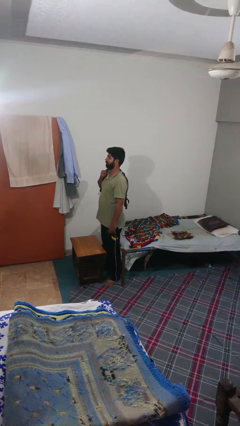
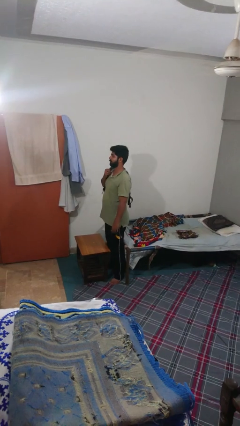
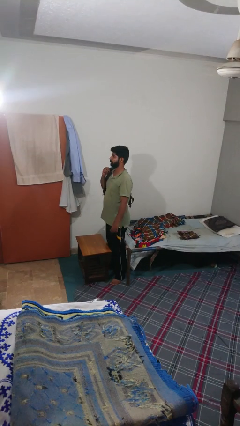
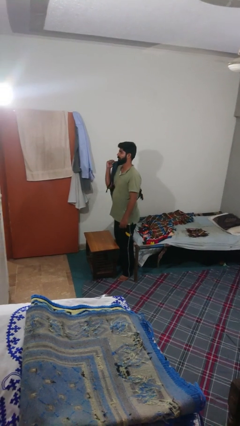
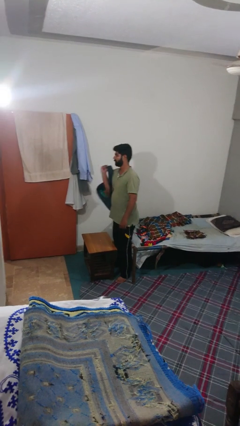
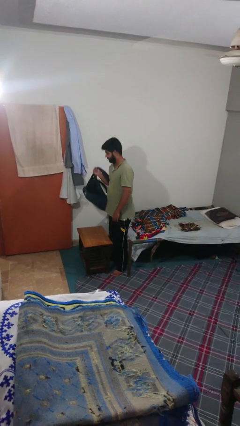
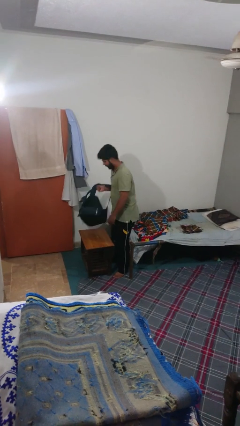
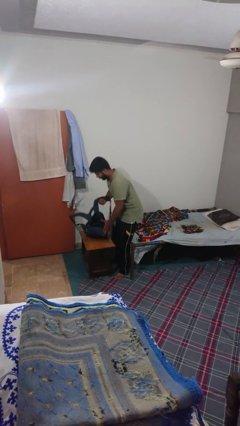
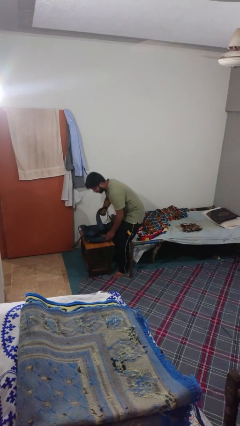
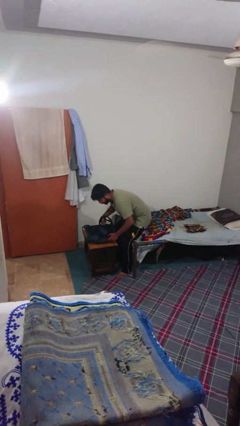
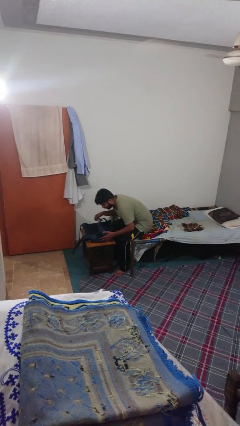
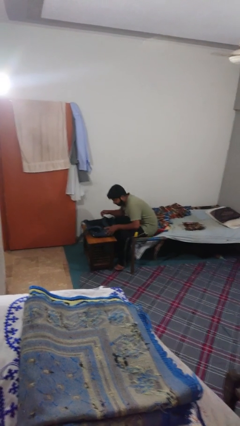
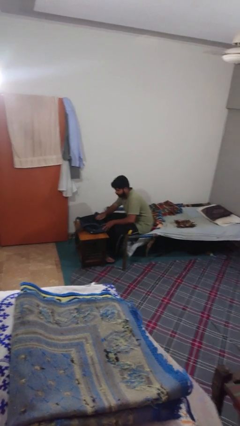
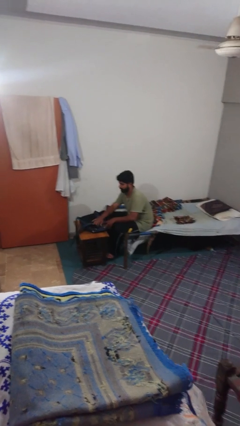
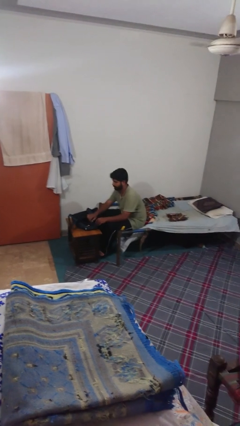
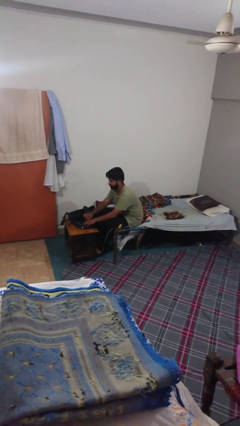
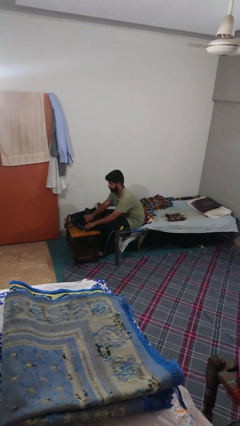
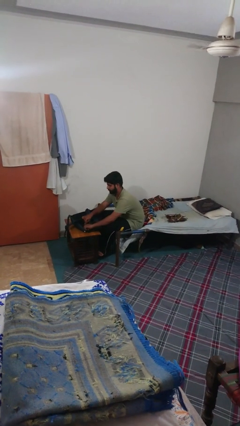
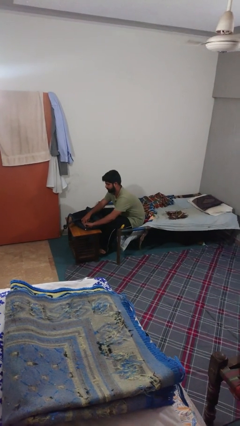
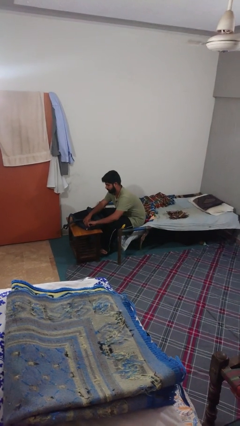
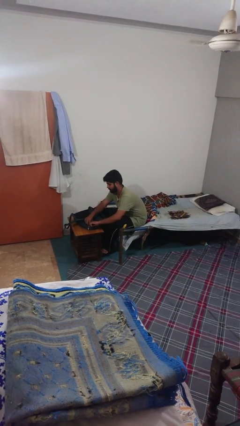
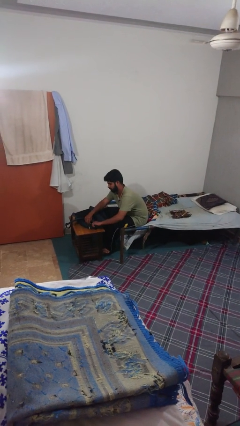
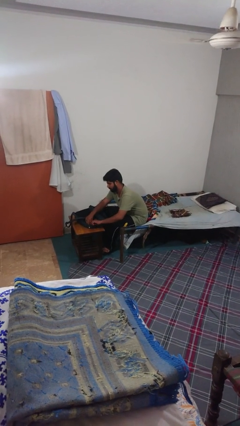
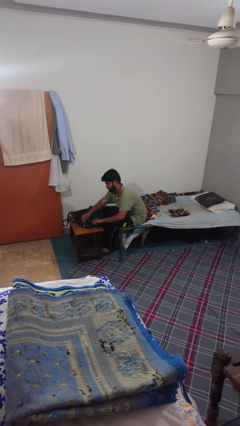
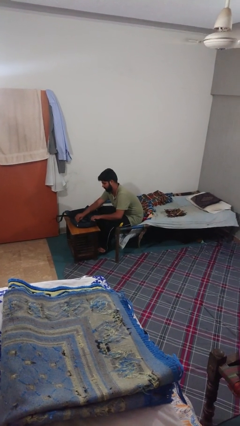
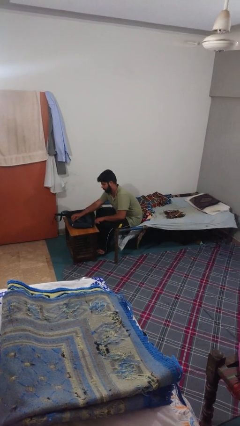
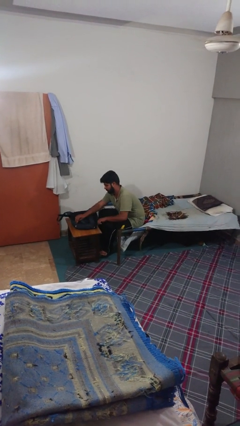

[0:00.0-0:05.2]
person takes off backpack

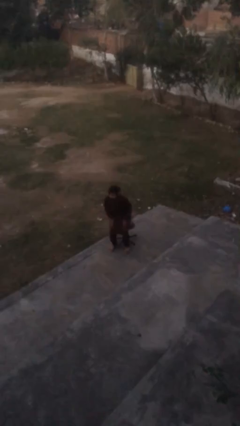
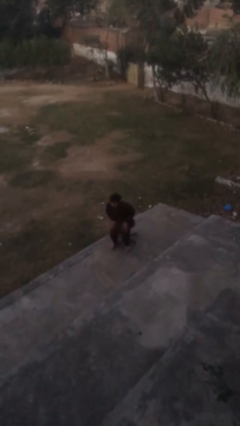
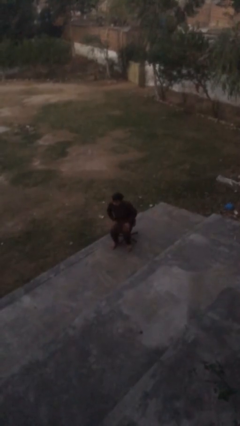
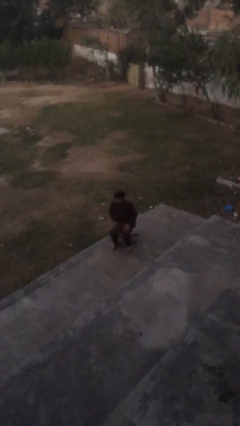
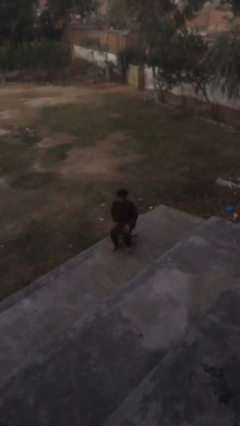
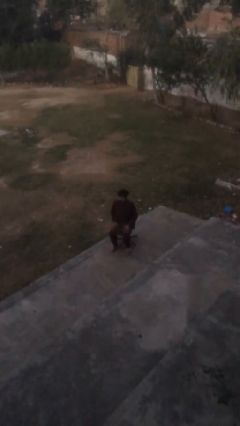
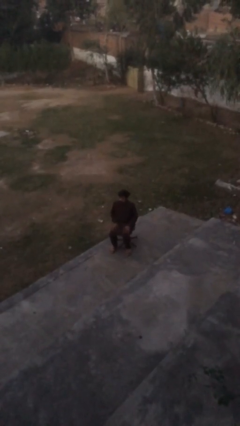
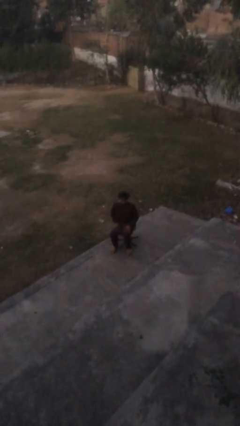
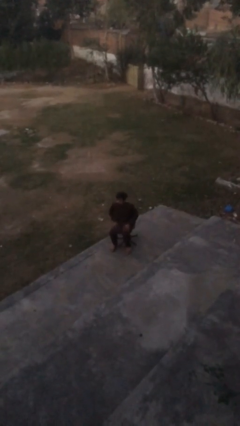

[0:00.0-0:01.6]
person sits down

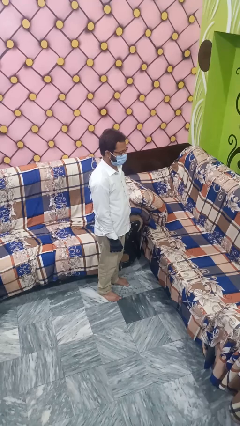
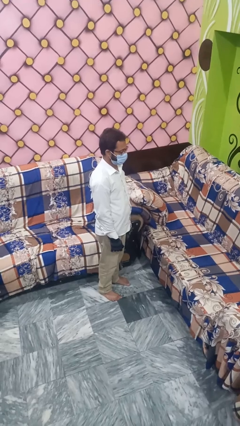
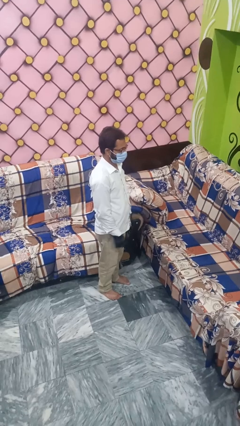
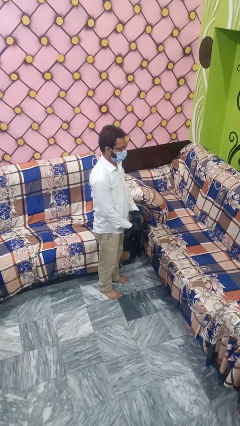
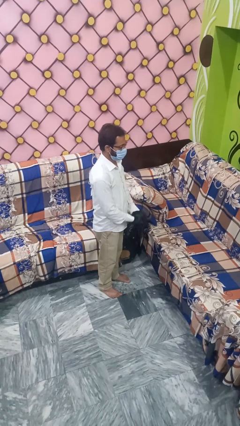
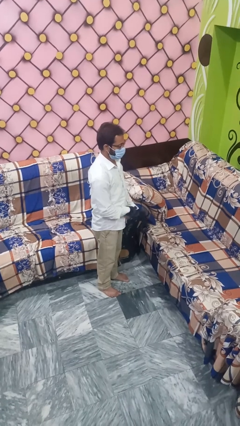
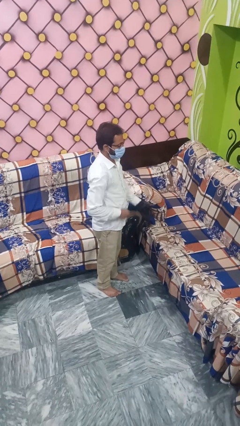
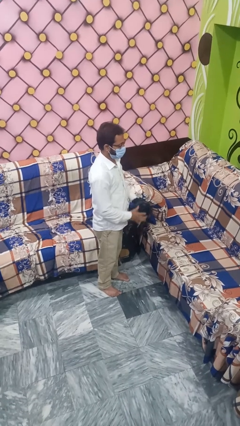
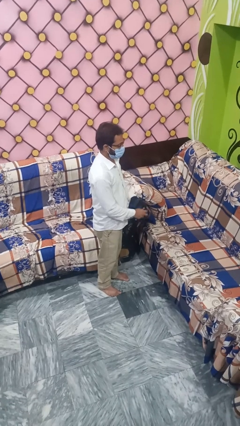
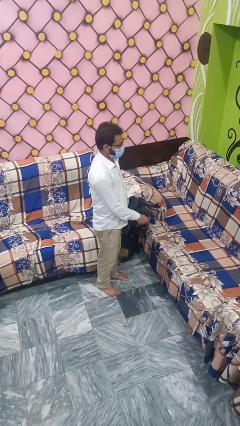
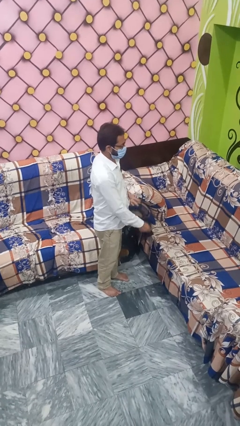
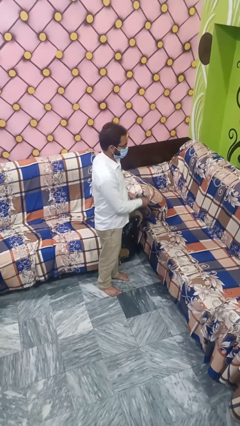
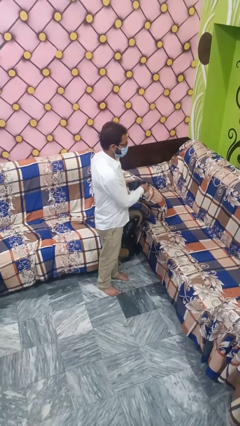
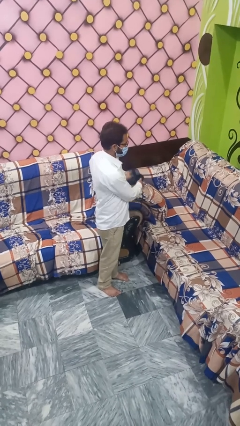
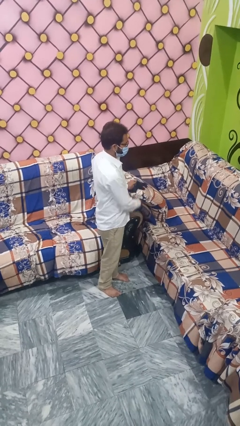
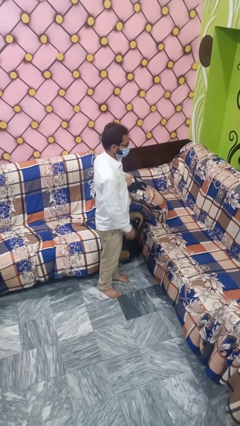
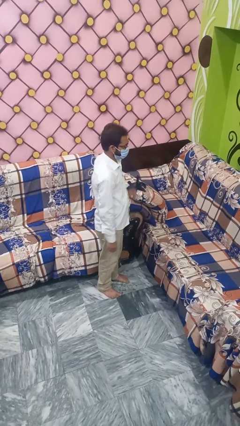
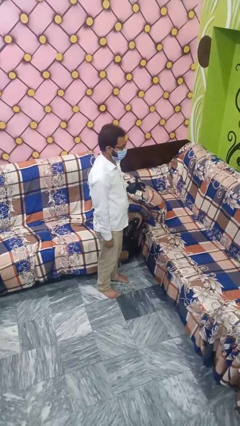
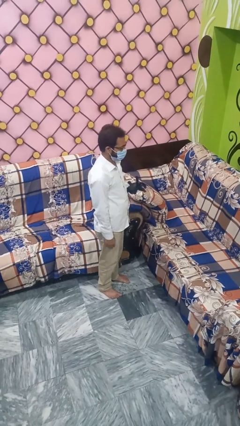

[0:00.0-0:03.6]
person takes off gloves

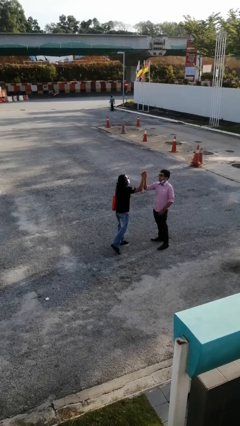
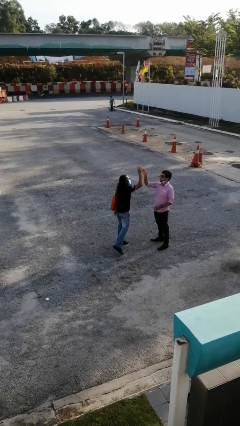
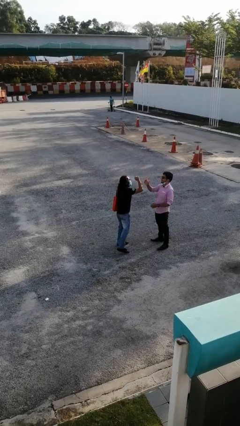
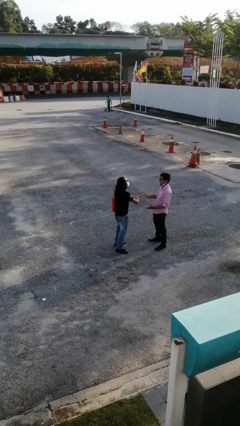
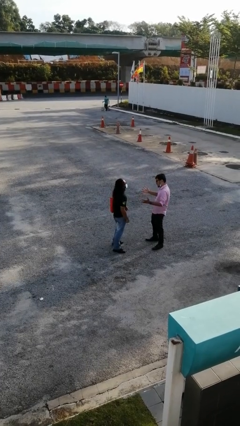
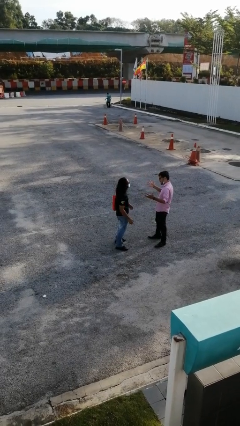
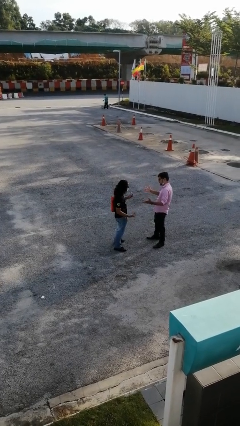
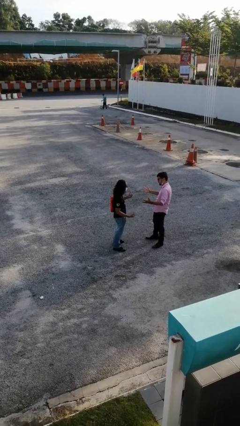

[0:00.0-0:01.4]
person highfives hand

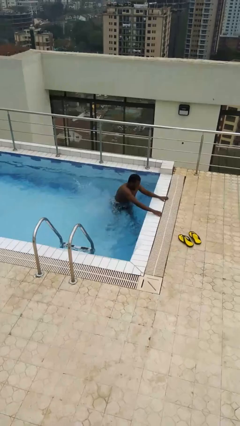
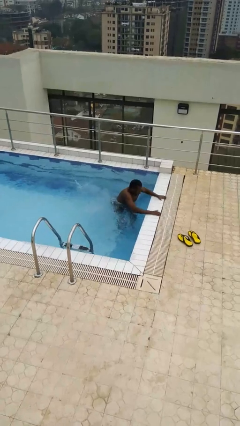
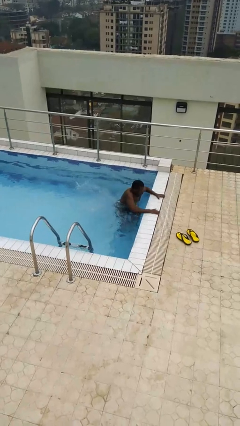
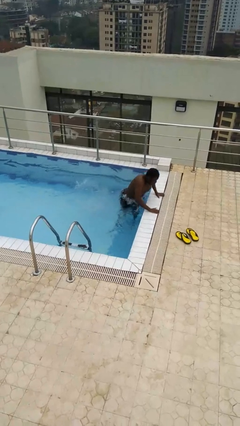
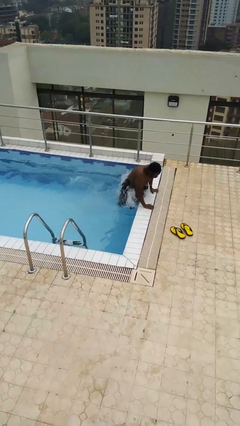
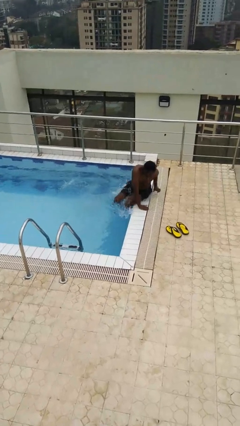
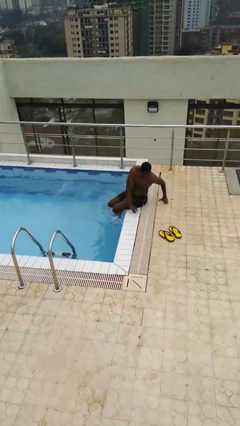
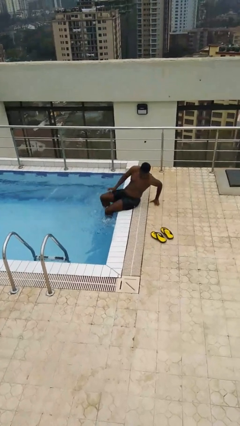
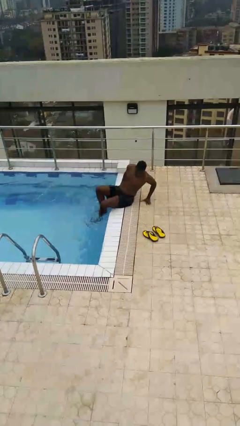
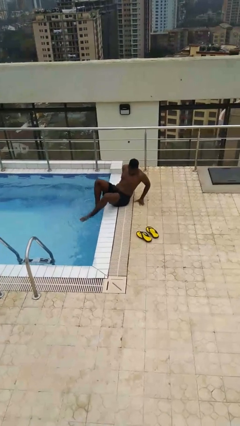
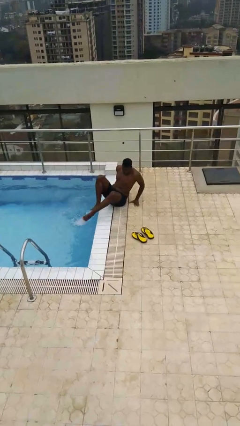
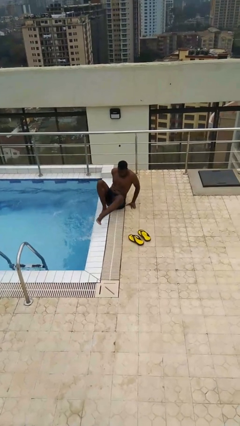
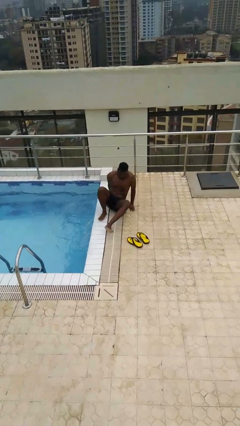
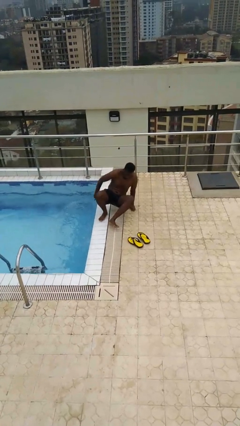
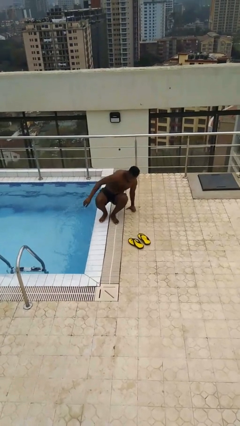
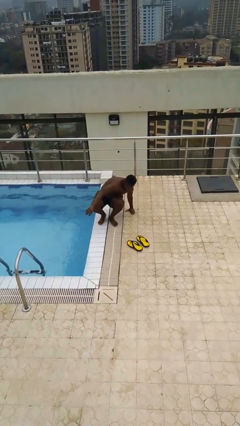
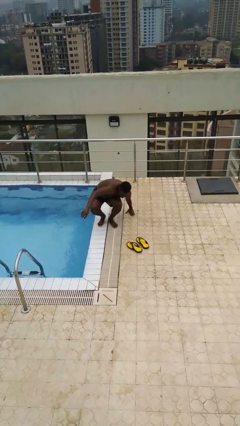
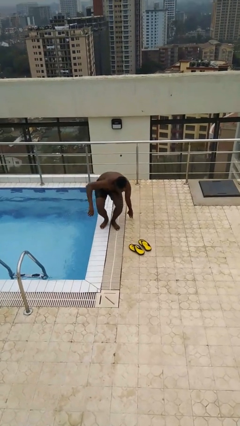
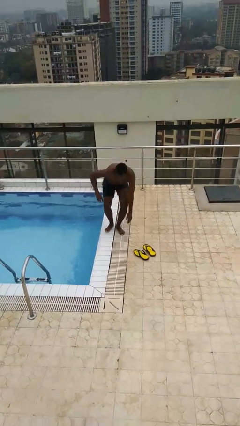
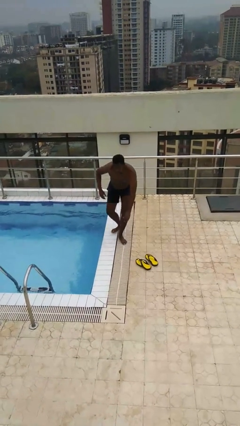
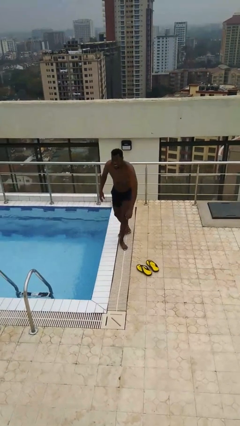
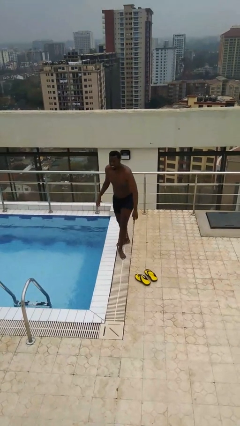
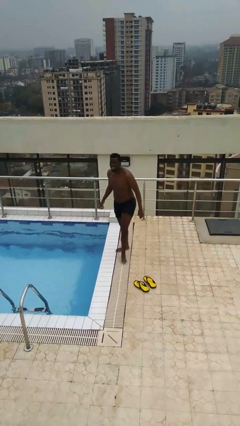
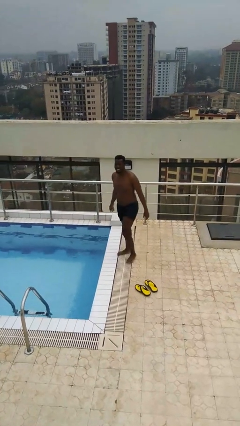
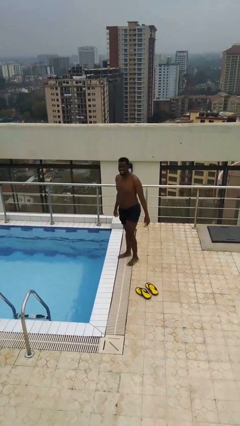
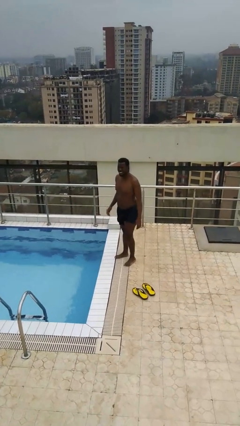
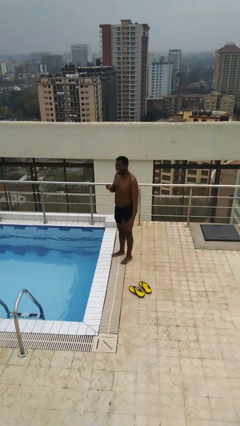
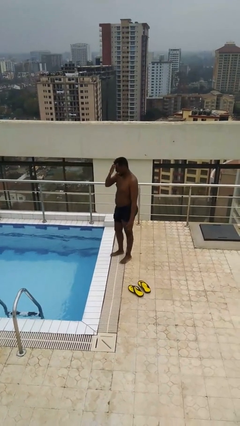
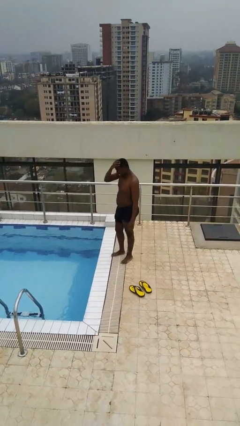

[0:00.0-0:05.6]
person exits pool
